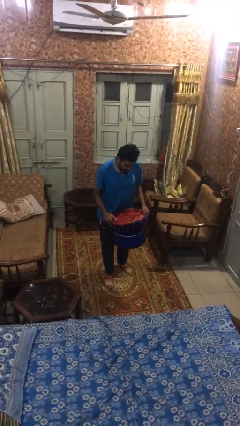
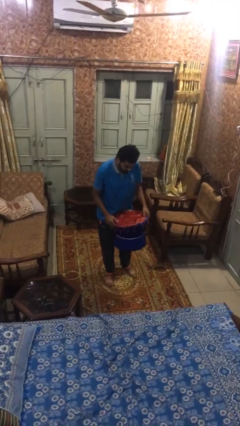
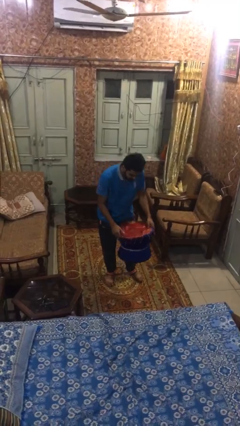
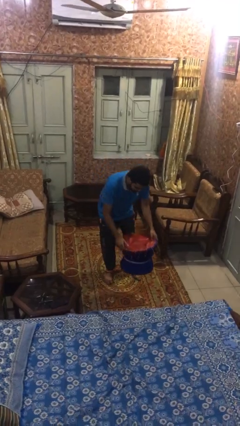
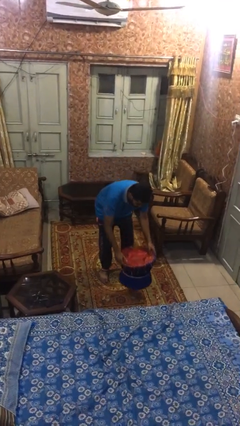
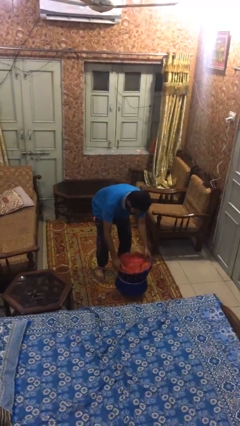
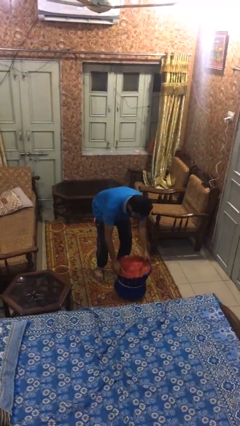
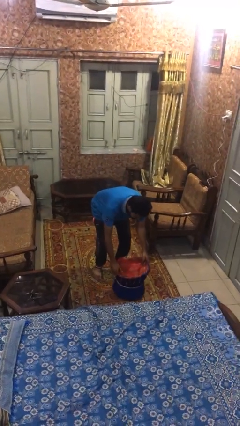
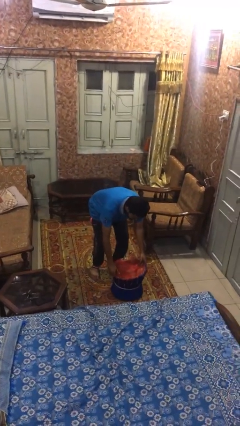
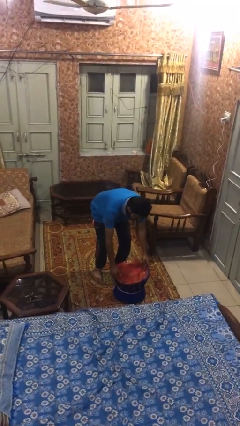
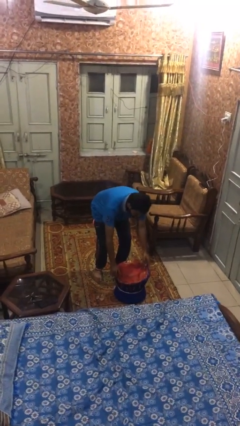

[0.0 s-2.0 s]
person puts down object on floor

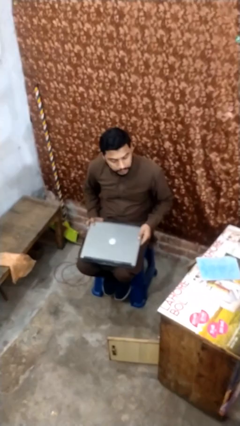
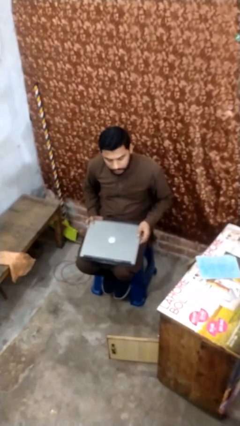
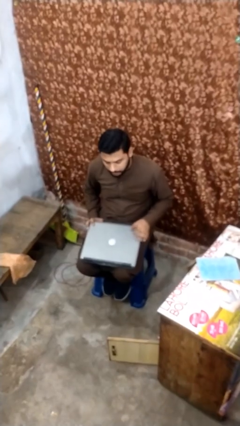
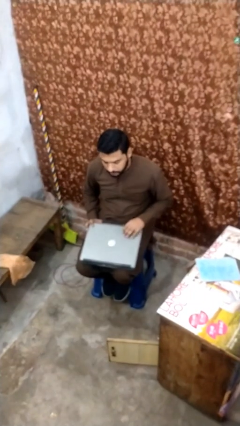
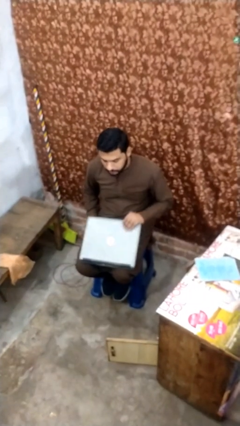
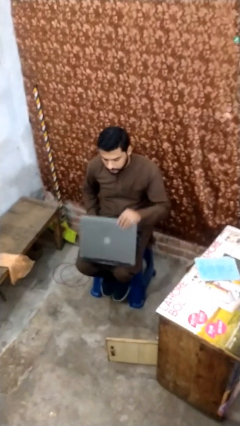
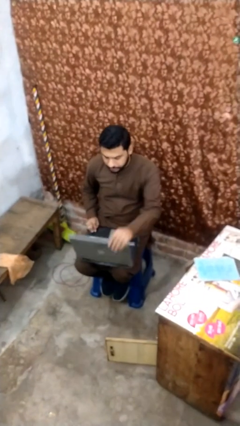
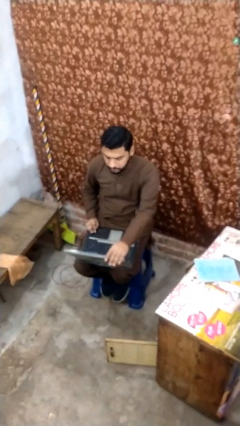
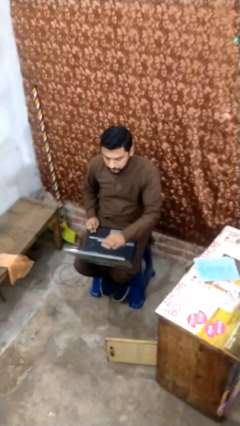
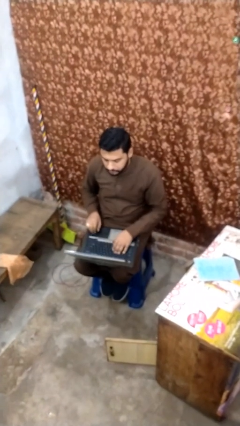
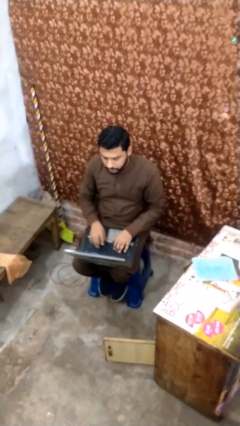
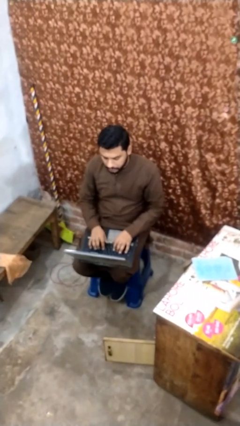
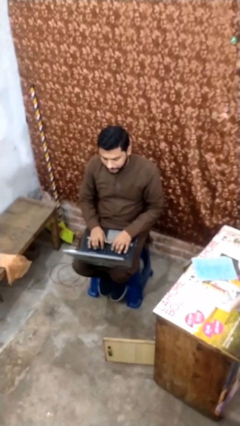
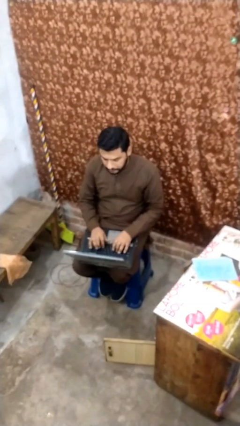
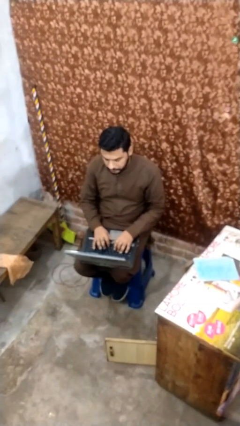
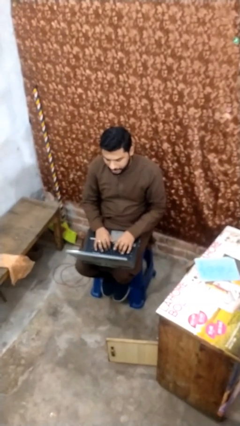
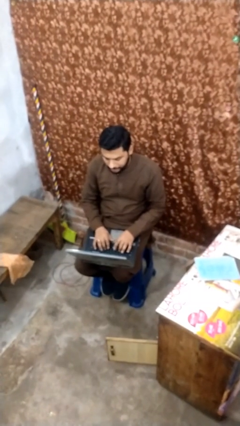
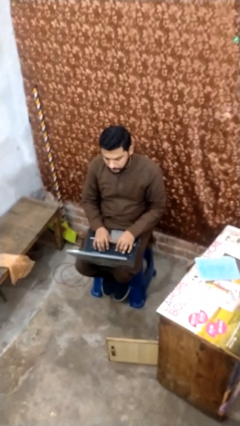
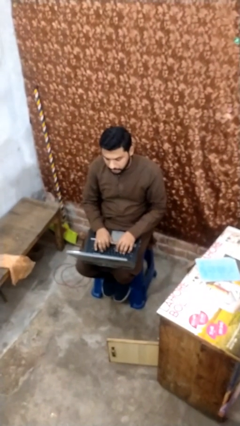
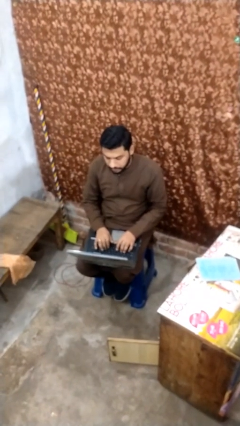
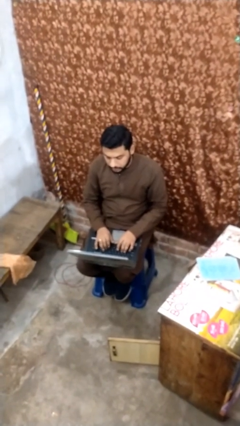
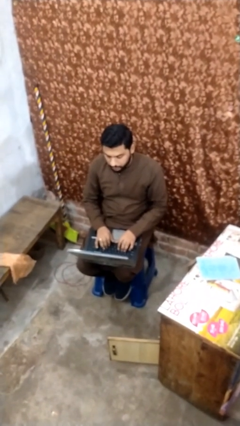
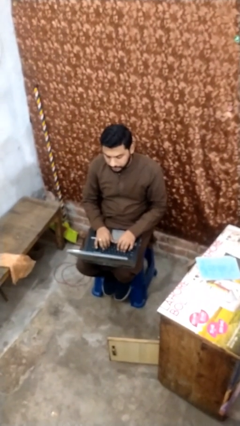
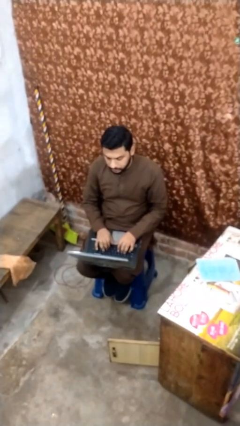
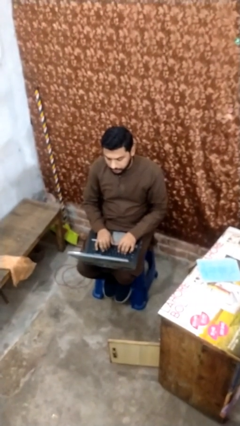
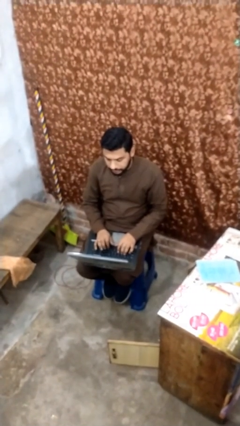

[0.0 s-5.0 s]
person interacts with laptop

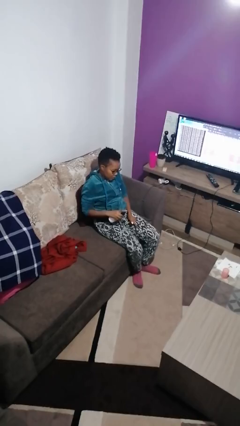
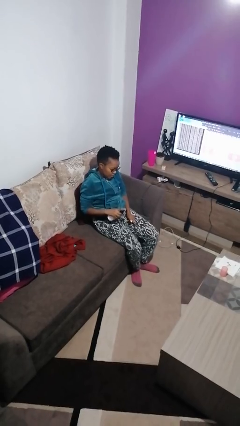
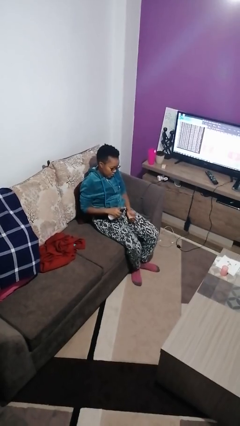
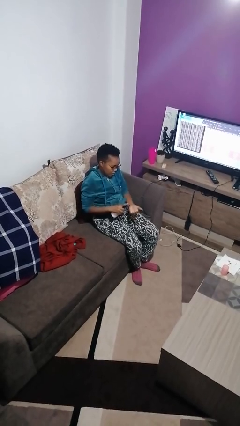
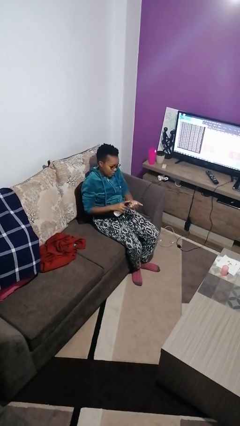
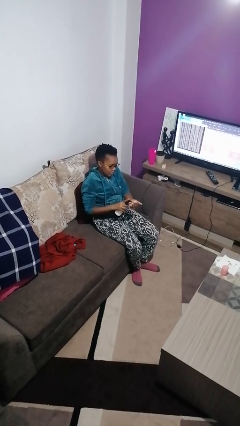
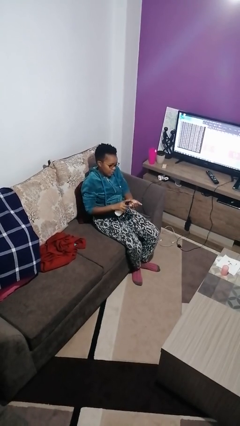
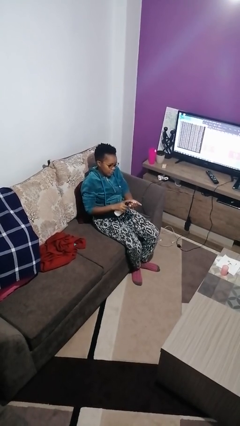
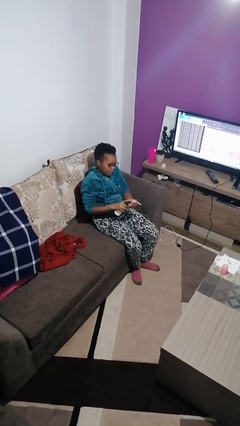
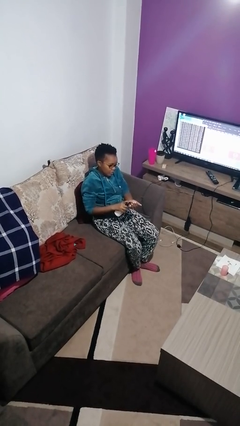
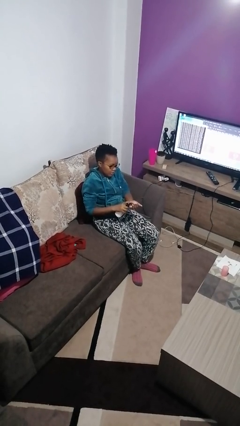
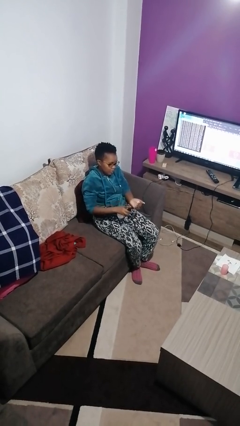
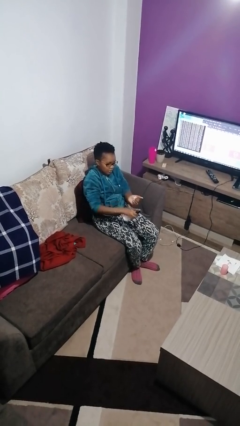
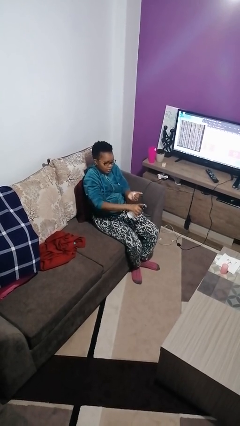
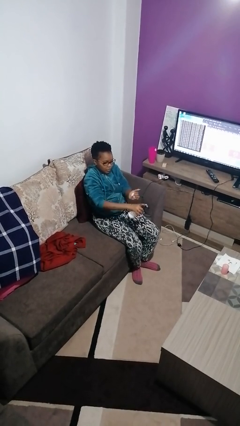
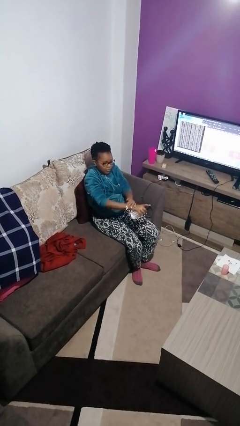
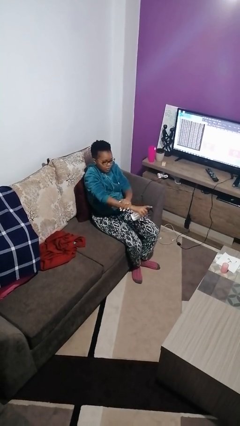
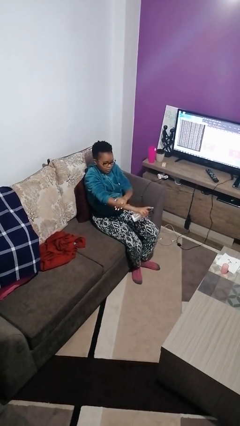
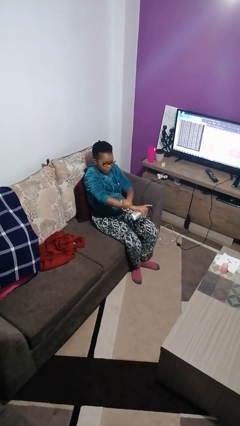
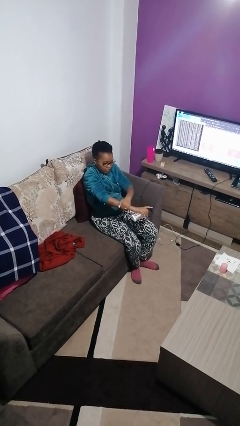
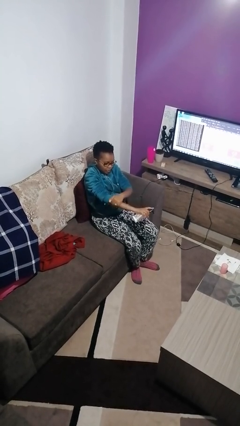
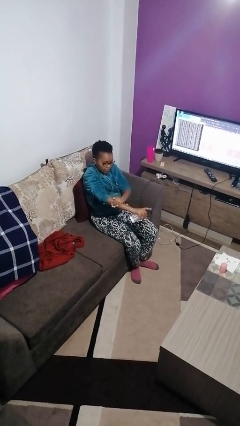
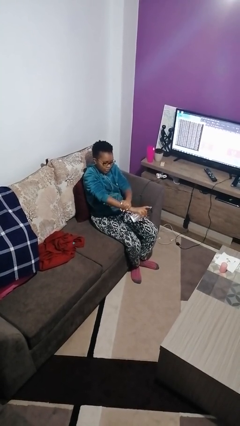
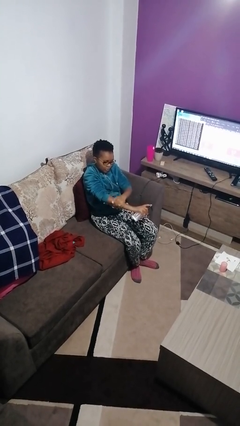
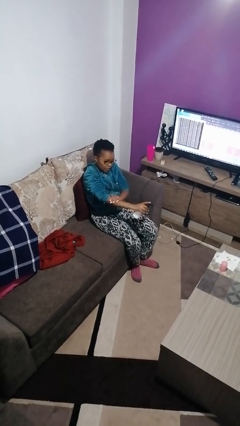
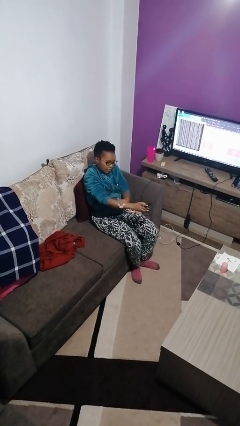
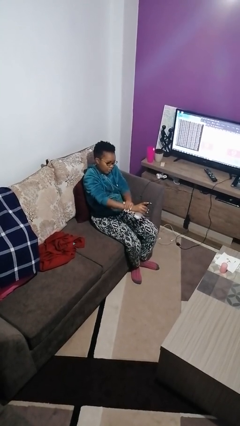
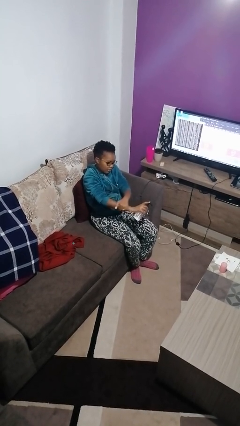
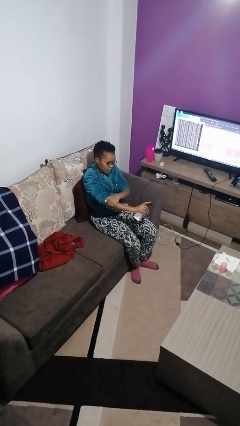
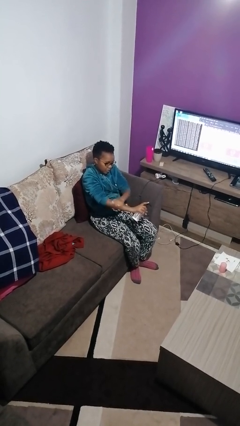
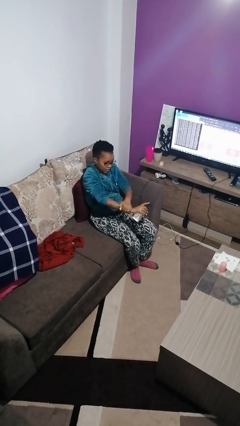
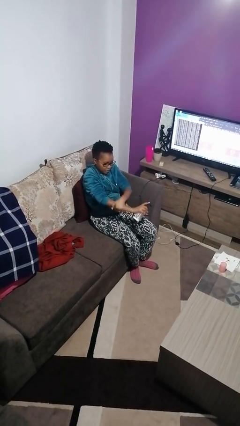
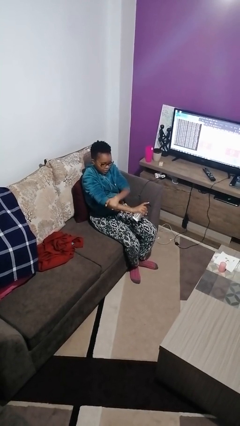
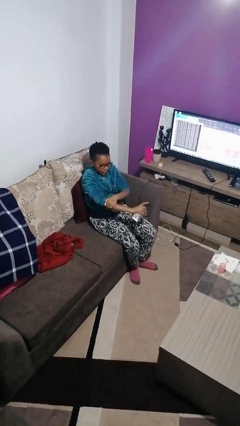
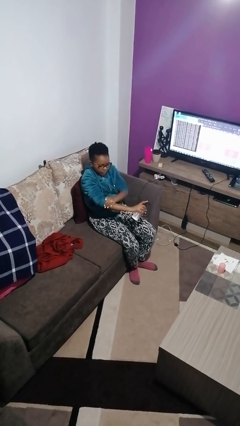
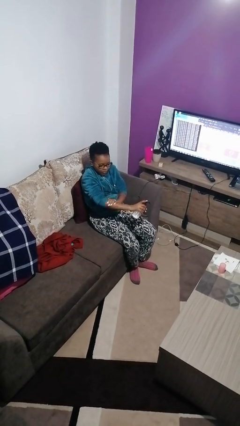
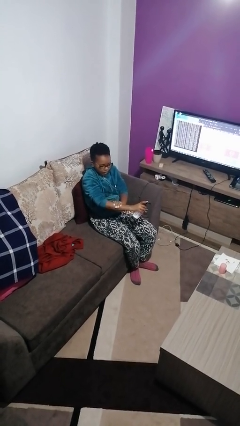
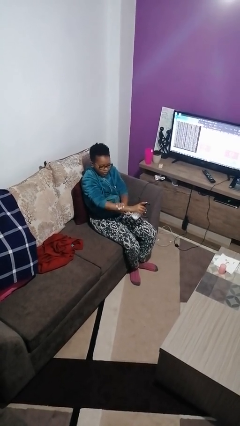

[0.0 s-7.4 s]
person applies sunscreen

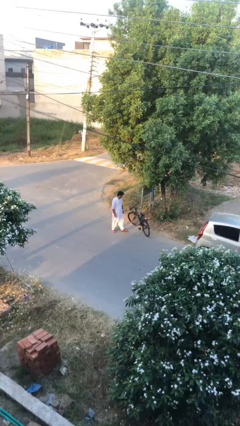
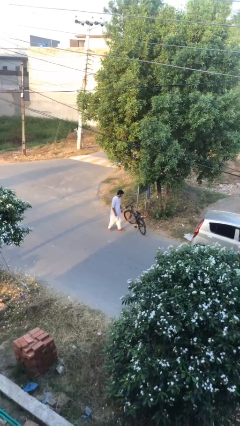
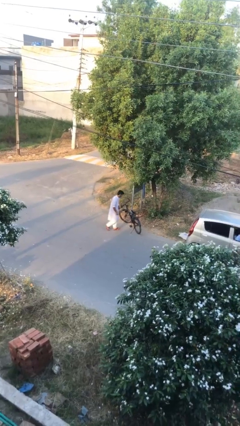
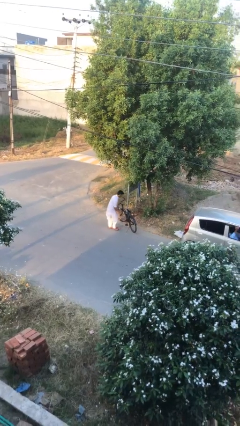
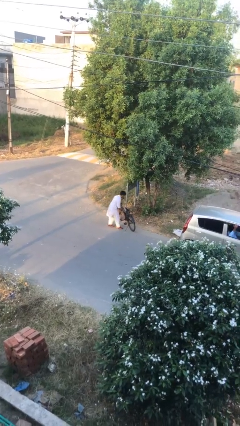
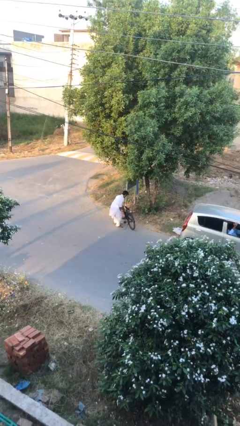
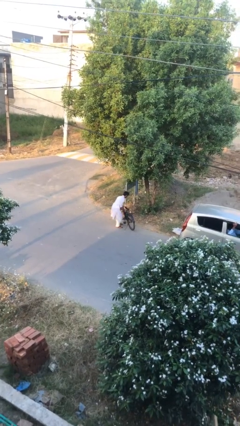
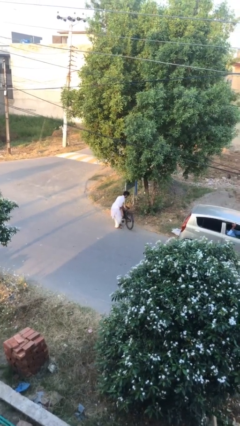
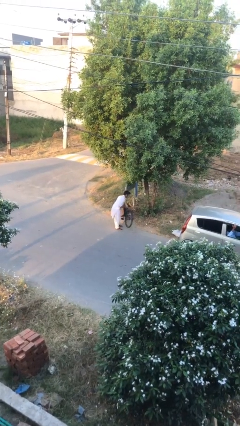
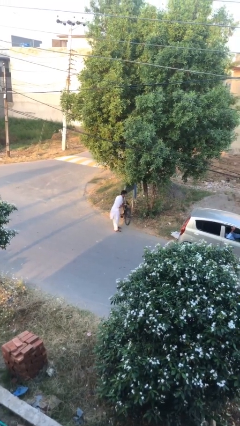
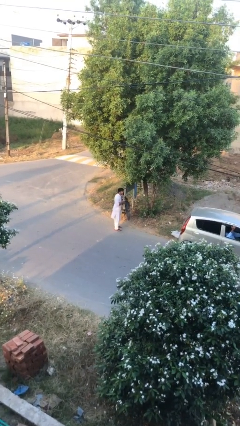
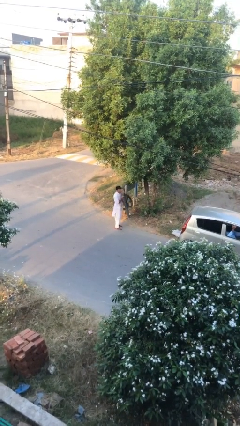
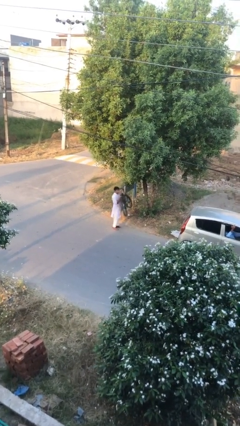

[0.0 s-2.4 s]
person picks up object from floor

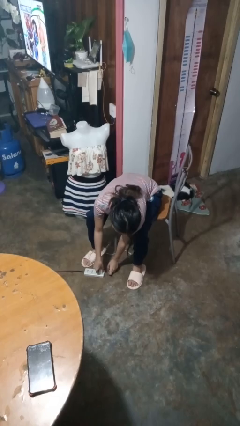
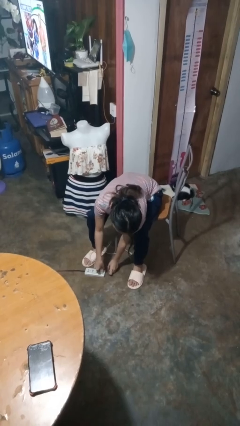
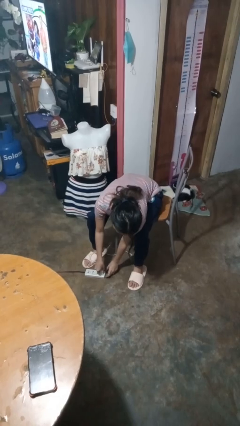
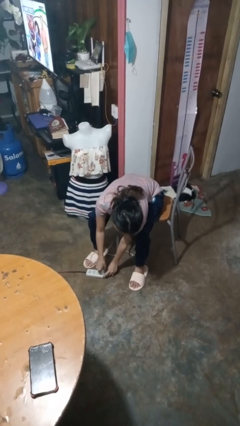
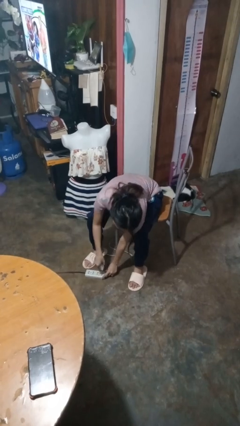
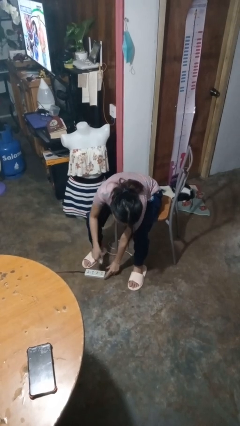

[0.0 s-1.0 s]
person unplugs from electrical socket
